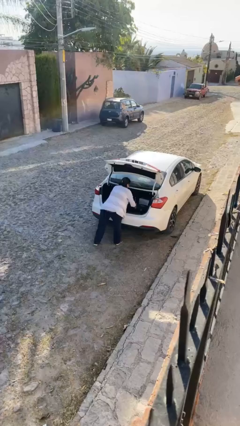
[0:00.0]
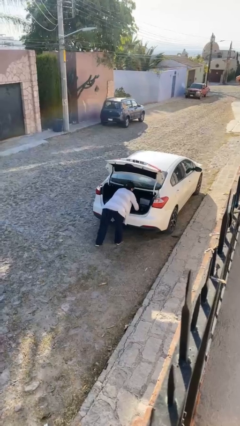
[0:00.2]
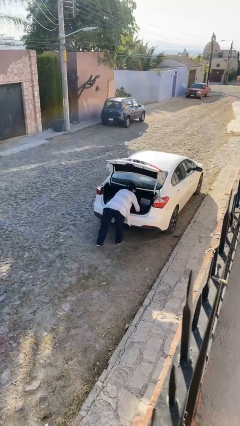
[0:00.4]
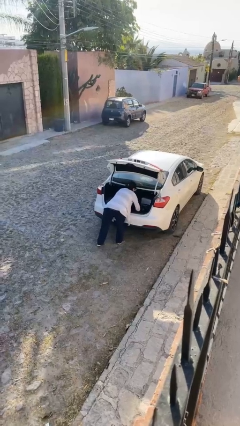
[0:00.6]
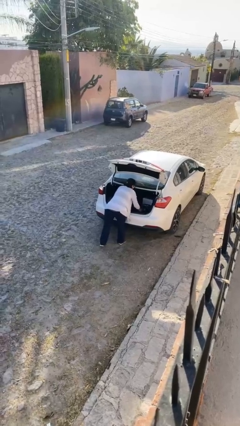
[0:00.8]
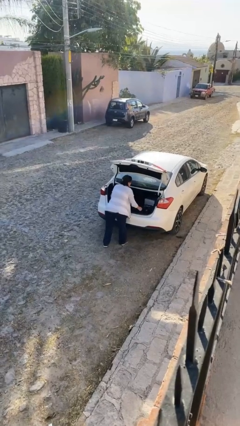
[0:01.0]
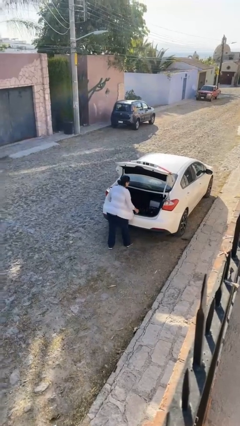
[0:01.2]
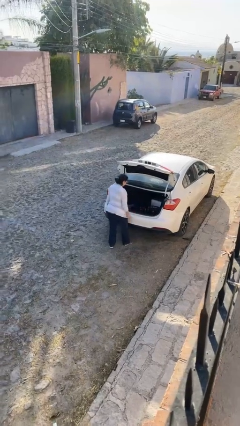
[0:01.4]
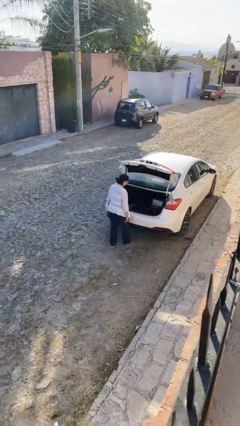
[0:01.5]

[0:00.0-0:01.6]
person loads car

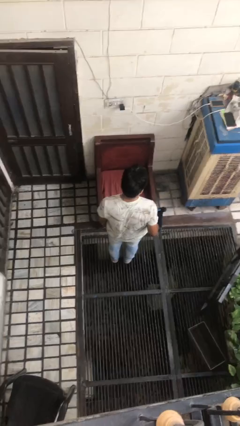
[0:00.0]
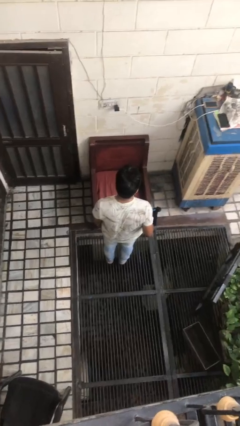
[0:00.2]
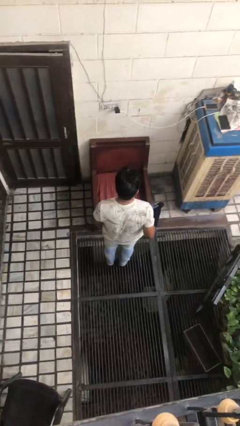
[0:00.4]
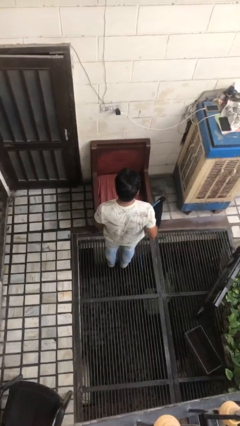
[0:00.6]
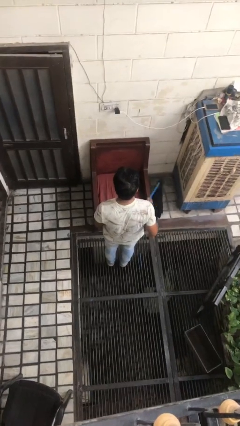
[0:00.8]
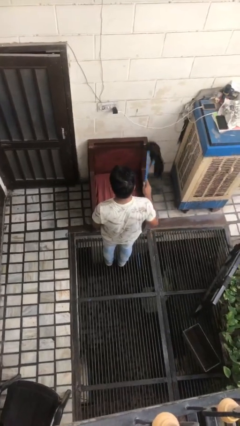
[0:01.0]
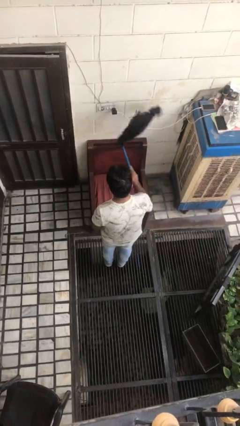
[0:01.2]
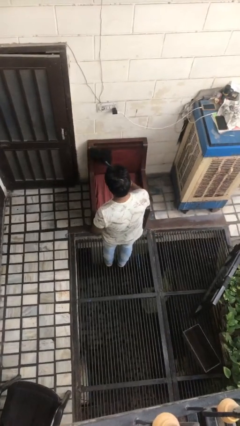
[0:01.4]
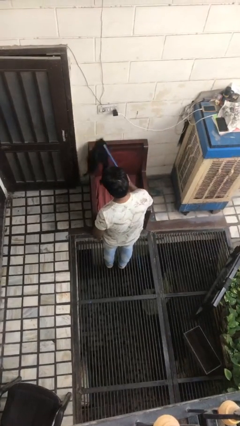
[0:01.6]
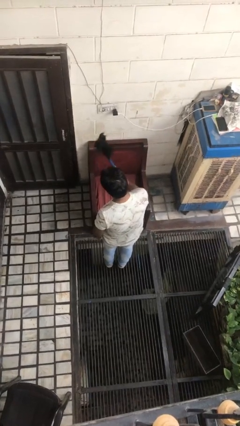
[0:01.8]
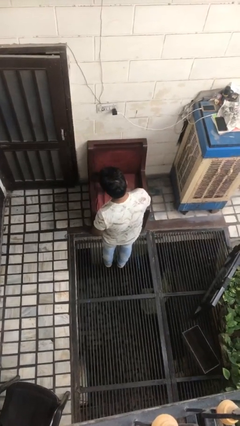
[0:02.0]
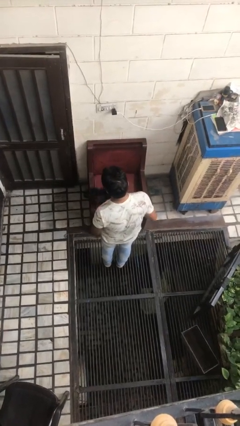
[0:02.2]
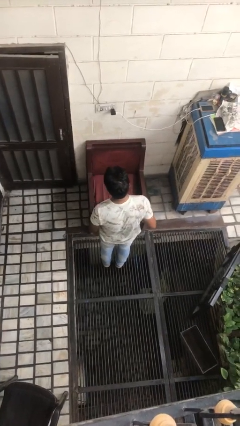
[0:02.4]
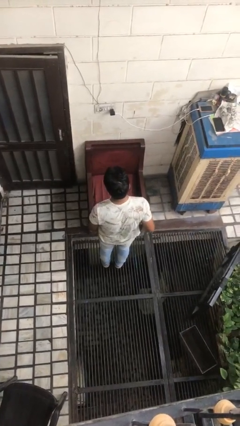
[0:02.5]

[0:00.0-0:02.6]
person dusts furniture

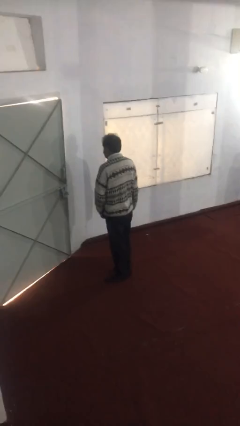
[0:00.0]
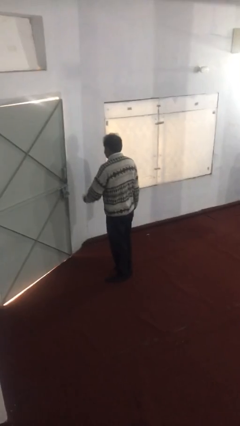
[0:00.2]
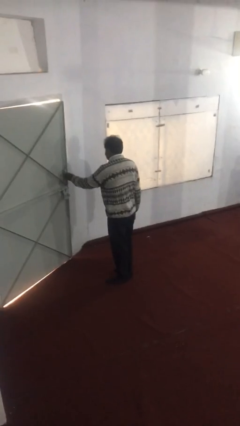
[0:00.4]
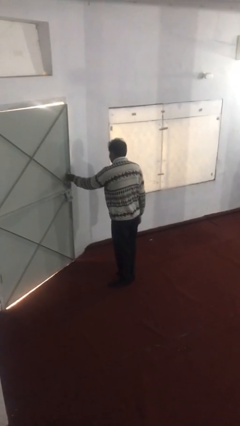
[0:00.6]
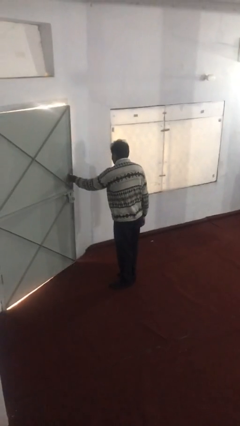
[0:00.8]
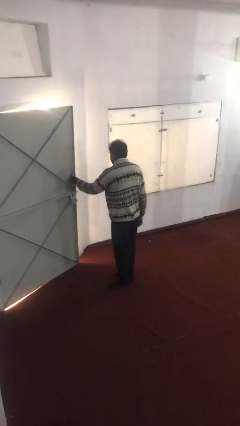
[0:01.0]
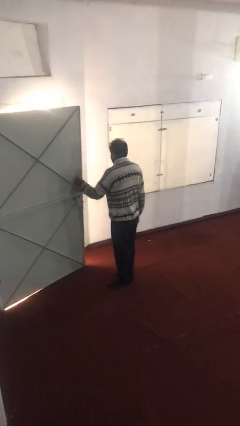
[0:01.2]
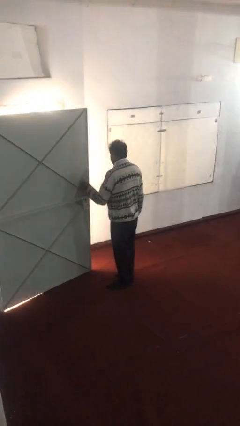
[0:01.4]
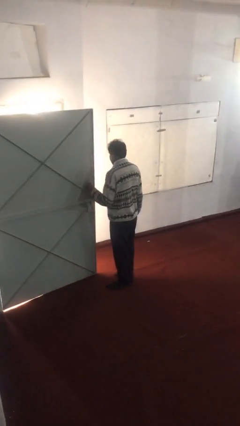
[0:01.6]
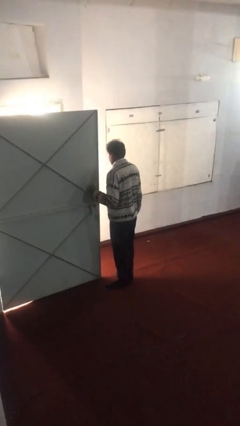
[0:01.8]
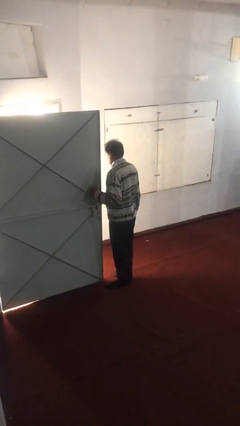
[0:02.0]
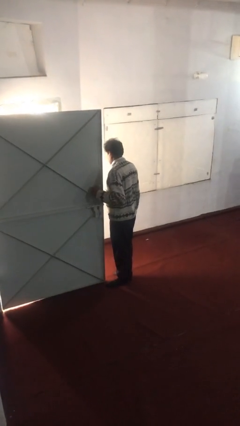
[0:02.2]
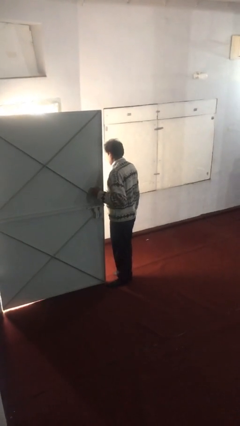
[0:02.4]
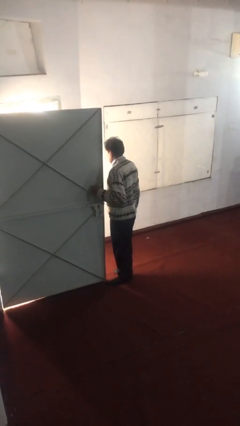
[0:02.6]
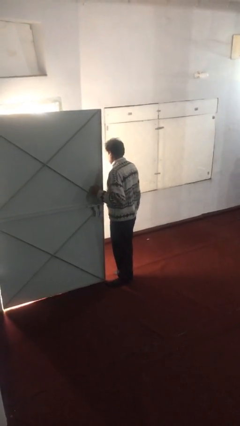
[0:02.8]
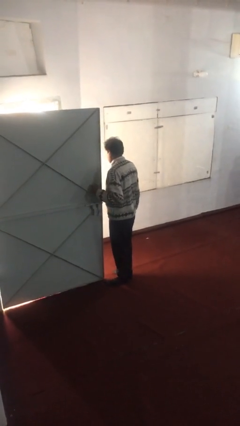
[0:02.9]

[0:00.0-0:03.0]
person opens facility door

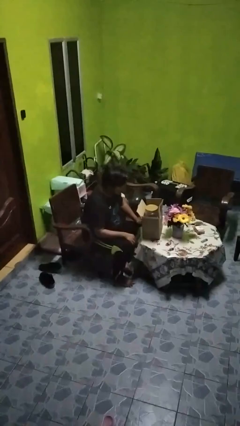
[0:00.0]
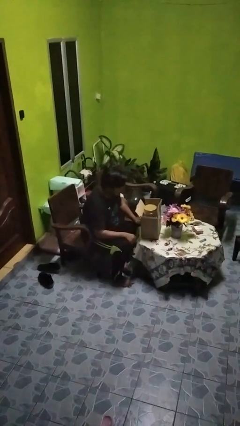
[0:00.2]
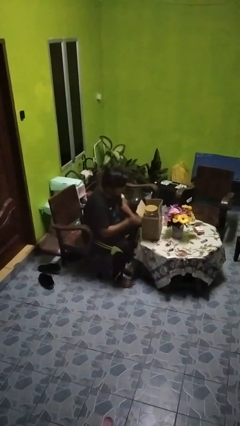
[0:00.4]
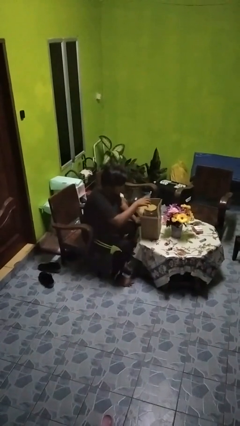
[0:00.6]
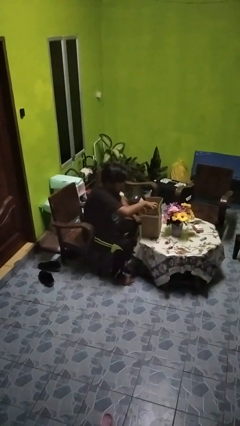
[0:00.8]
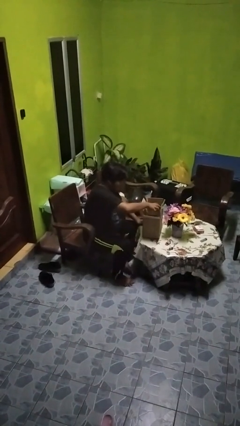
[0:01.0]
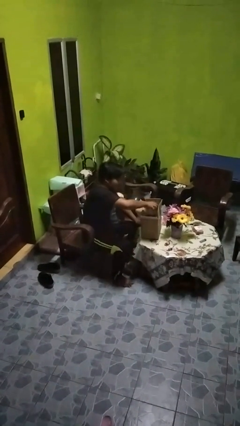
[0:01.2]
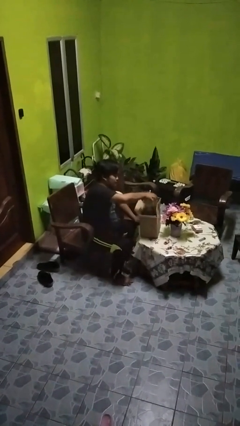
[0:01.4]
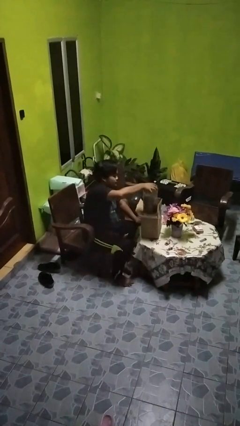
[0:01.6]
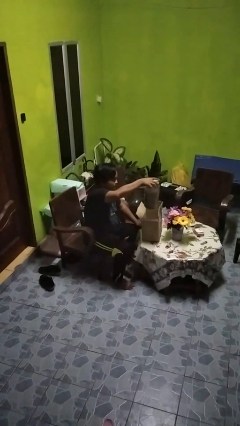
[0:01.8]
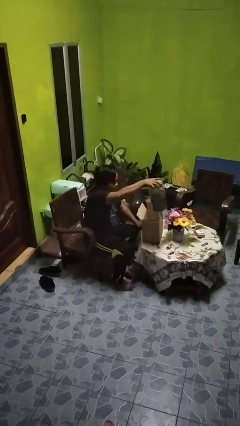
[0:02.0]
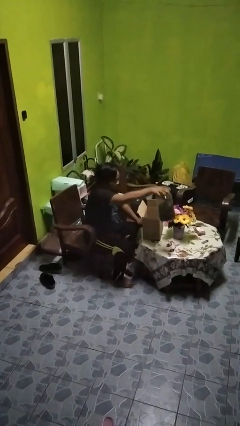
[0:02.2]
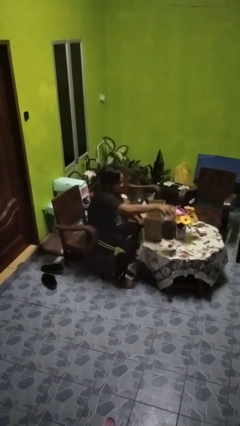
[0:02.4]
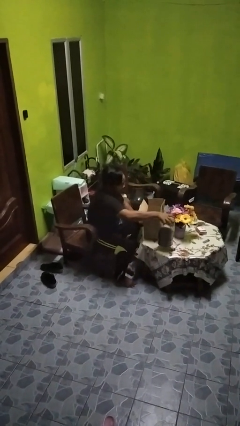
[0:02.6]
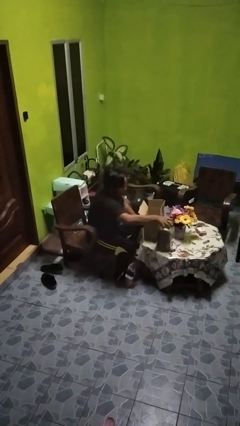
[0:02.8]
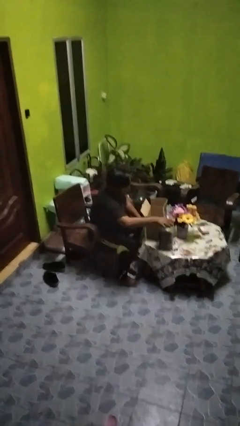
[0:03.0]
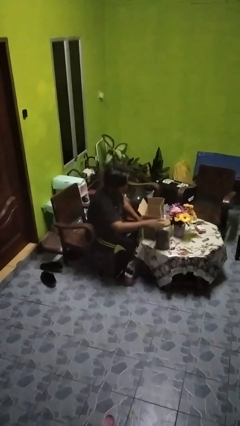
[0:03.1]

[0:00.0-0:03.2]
person takes object from box

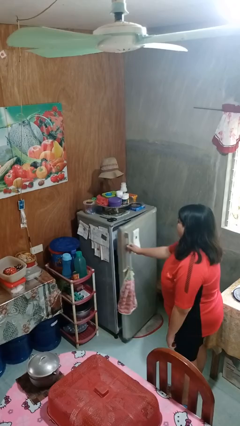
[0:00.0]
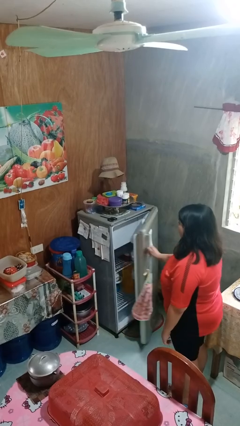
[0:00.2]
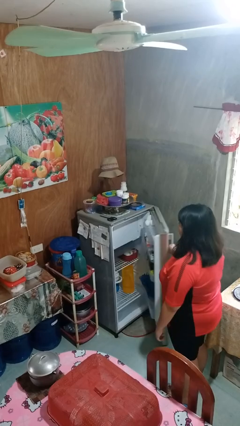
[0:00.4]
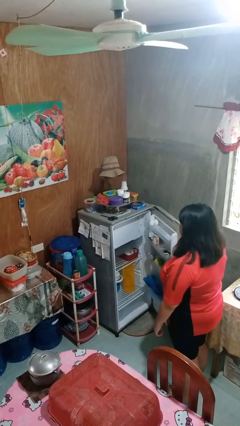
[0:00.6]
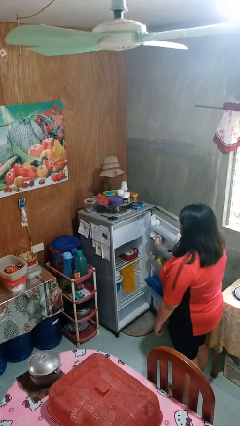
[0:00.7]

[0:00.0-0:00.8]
person opens refrigerator

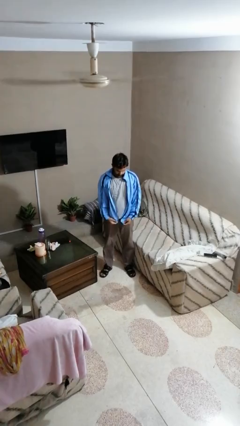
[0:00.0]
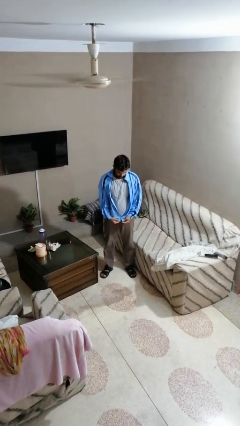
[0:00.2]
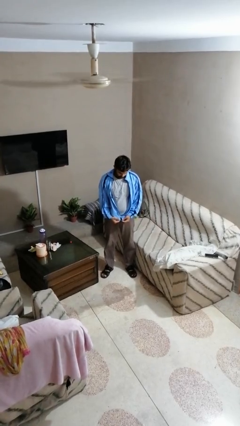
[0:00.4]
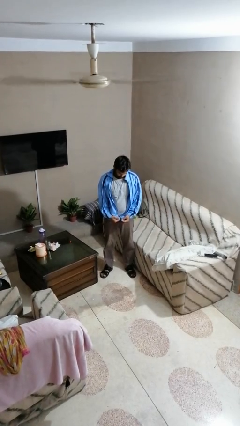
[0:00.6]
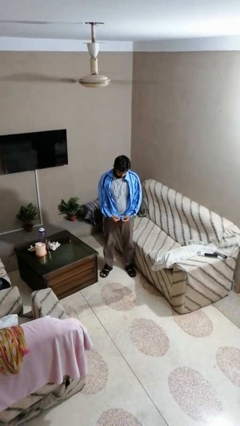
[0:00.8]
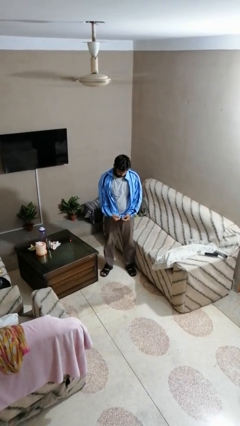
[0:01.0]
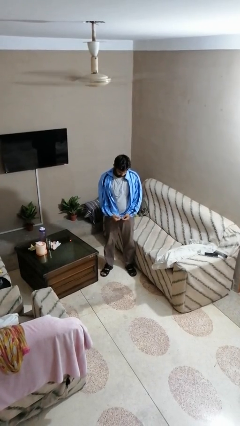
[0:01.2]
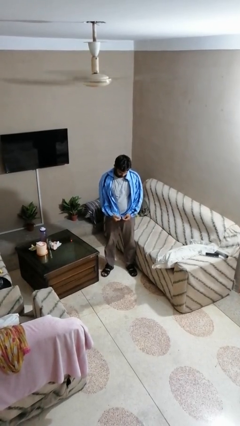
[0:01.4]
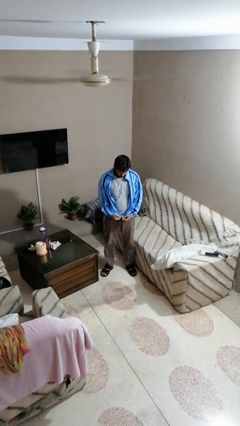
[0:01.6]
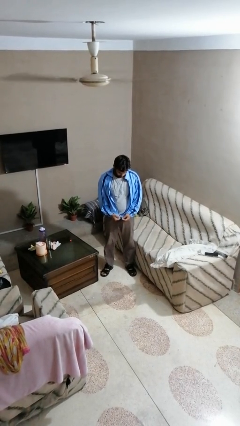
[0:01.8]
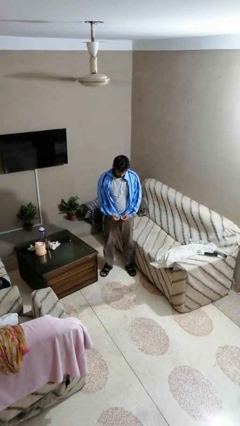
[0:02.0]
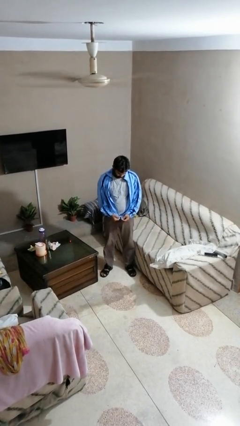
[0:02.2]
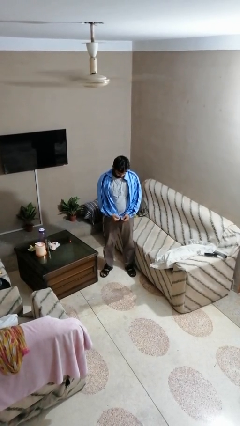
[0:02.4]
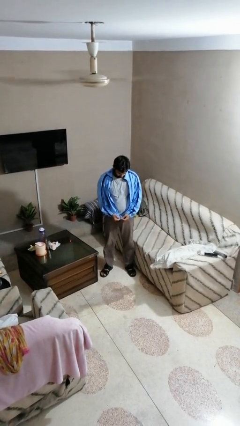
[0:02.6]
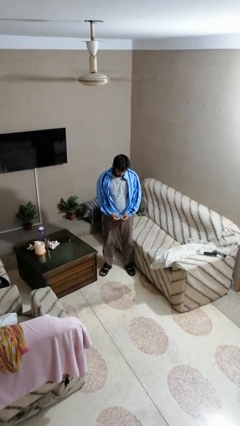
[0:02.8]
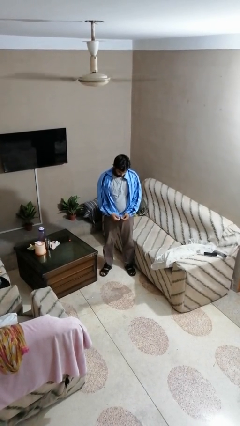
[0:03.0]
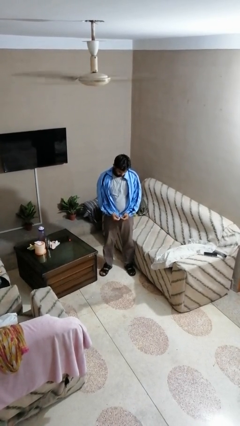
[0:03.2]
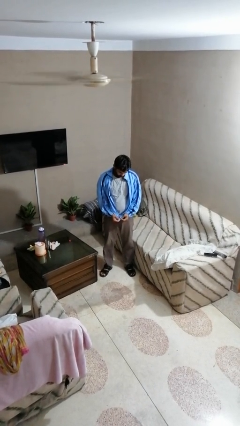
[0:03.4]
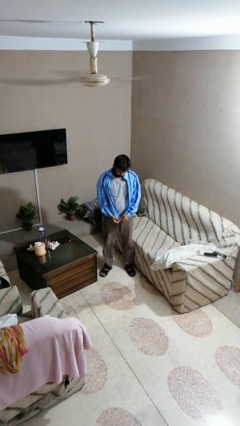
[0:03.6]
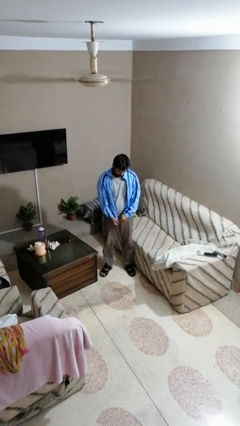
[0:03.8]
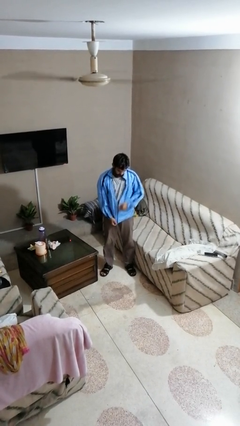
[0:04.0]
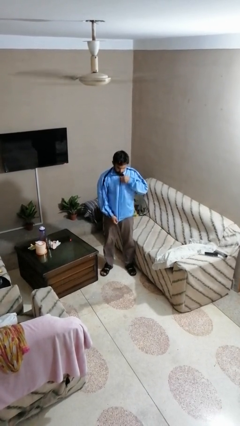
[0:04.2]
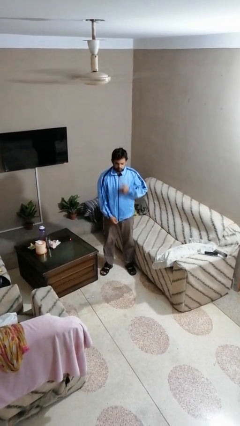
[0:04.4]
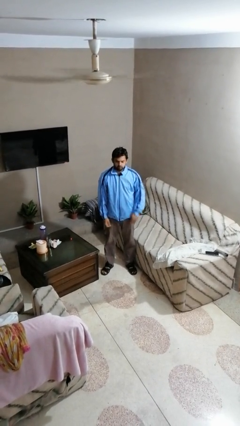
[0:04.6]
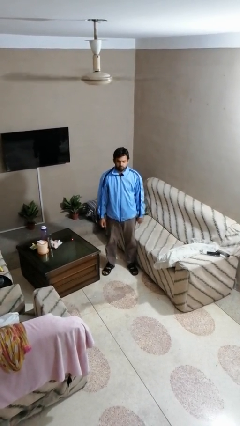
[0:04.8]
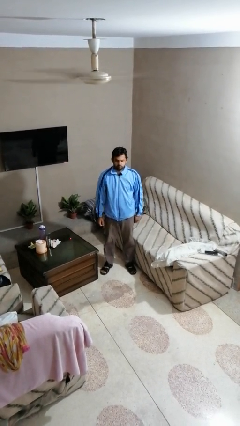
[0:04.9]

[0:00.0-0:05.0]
person zips up jacket

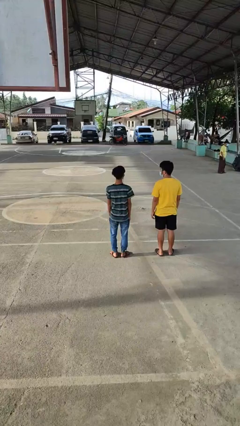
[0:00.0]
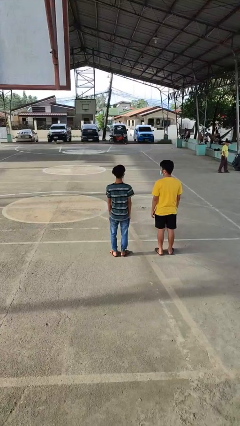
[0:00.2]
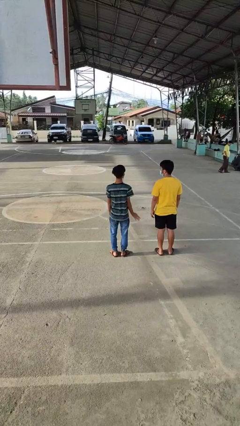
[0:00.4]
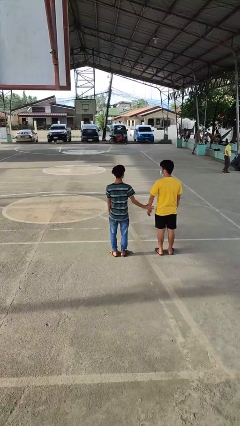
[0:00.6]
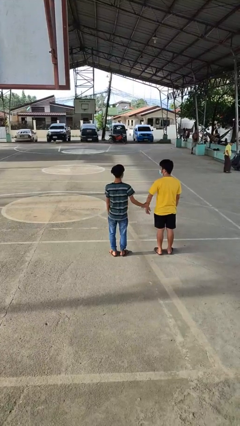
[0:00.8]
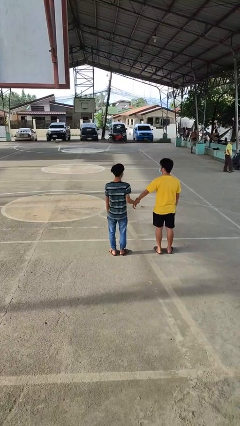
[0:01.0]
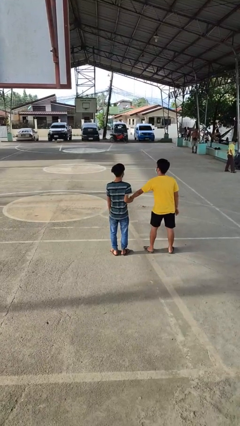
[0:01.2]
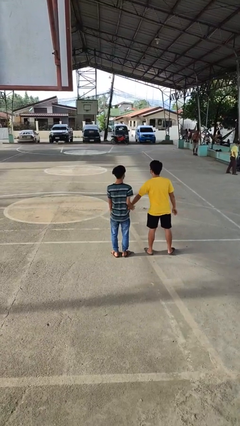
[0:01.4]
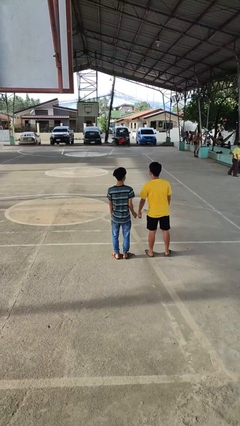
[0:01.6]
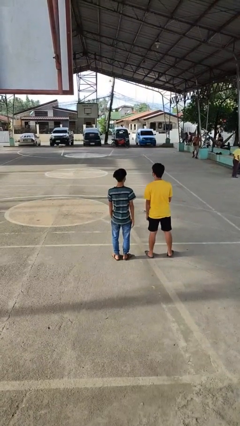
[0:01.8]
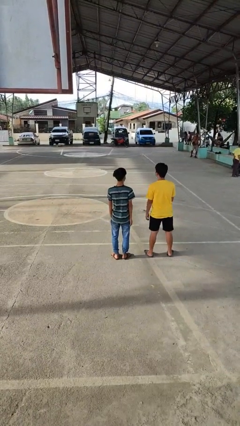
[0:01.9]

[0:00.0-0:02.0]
person grabs person by forearm
